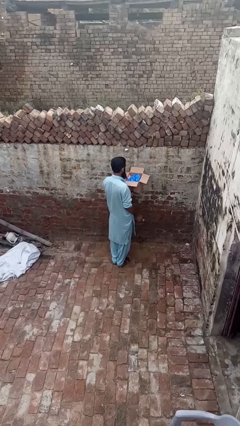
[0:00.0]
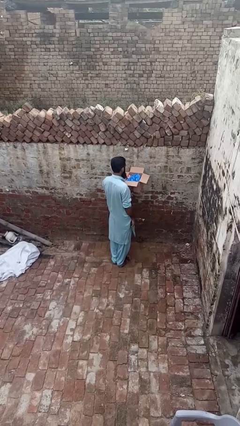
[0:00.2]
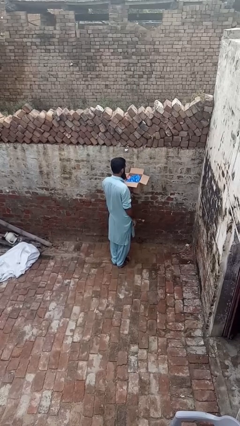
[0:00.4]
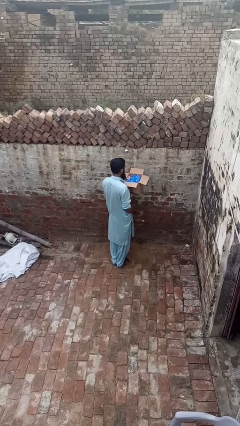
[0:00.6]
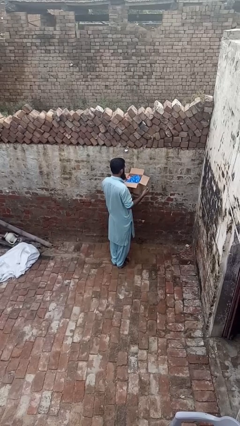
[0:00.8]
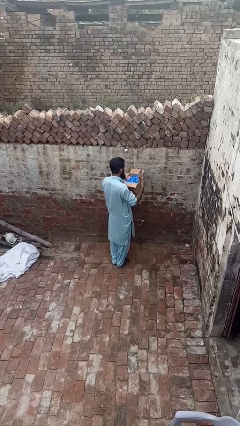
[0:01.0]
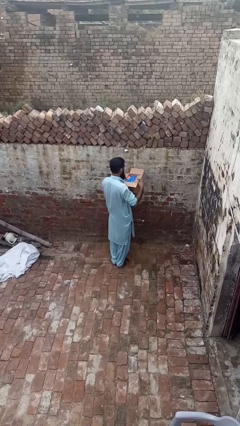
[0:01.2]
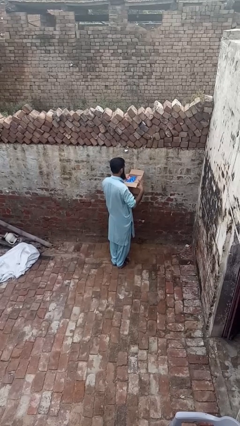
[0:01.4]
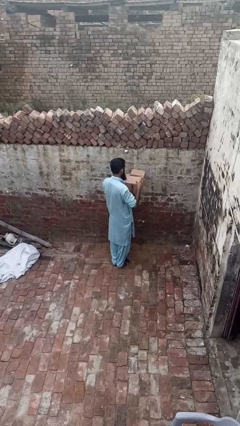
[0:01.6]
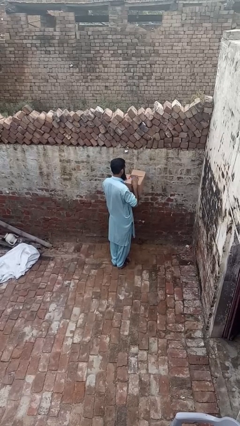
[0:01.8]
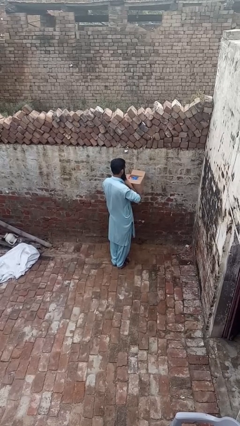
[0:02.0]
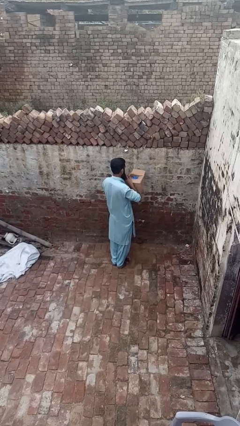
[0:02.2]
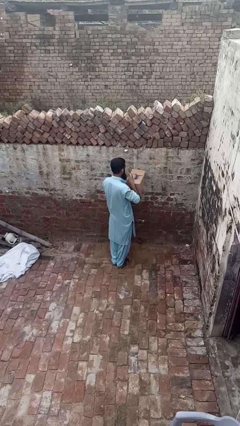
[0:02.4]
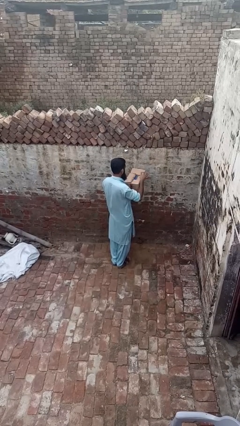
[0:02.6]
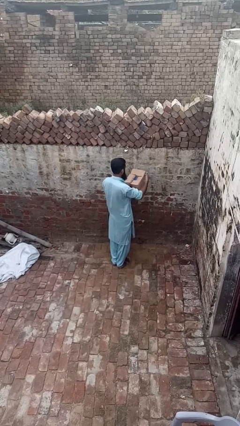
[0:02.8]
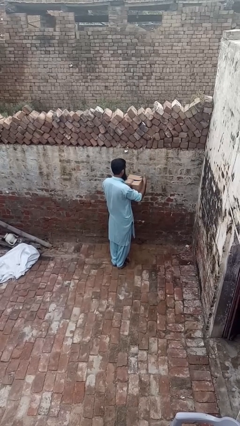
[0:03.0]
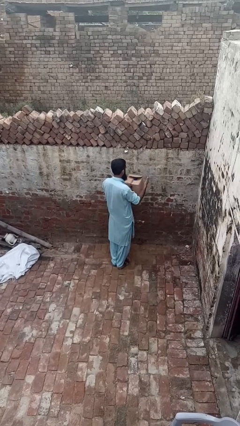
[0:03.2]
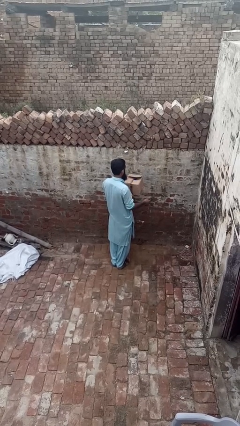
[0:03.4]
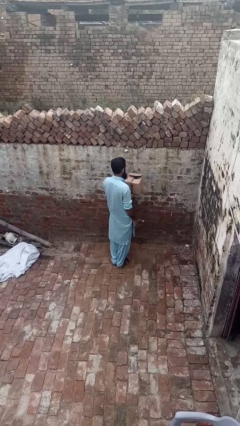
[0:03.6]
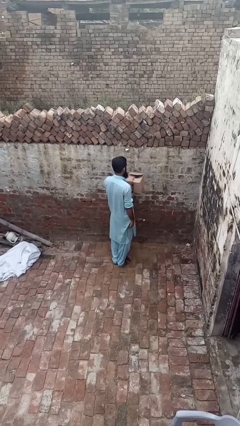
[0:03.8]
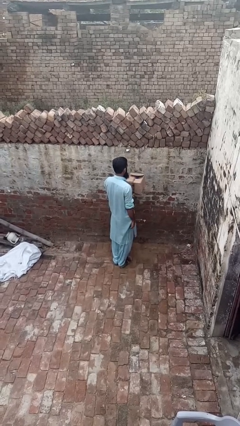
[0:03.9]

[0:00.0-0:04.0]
person closes mailbox

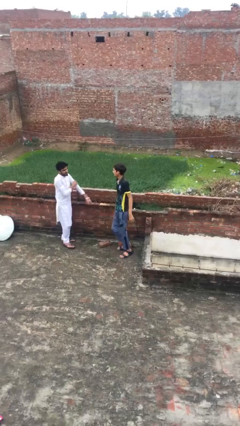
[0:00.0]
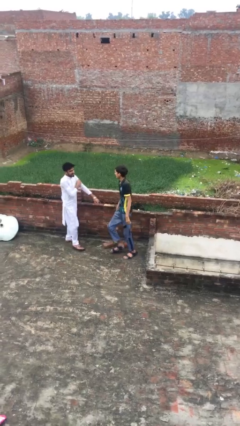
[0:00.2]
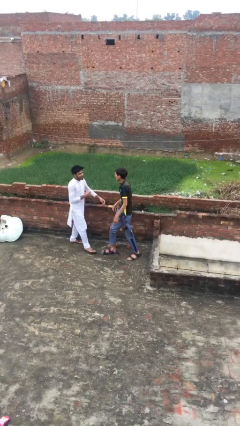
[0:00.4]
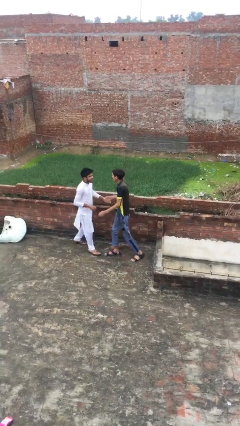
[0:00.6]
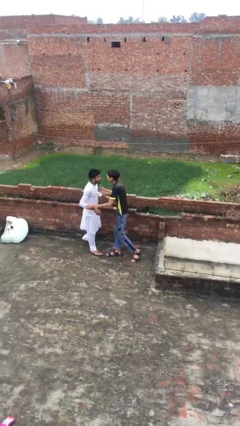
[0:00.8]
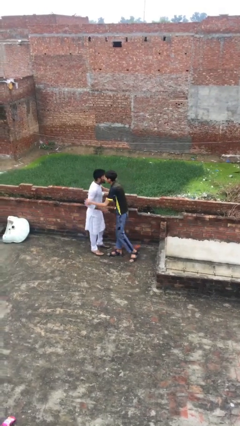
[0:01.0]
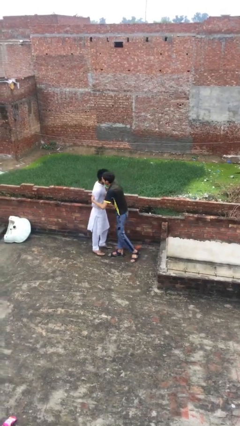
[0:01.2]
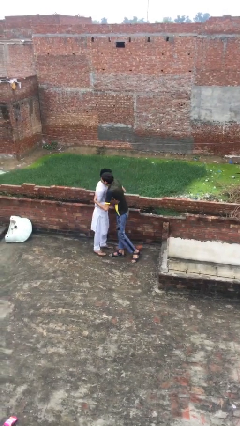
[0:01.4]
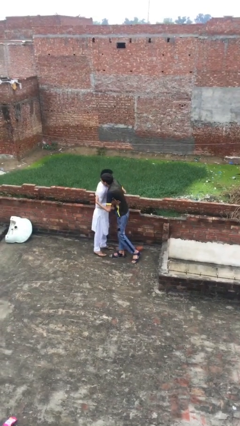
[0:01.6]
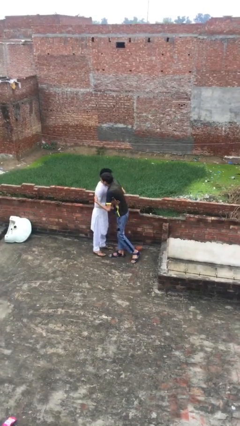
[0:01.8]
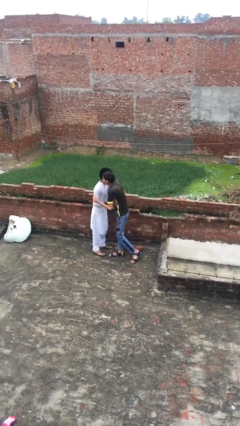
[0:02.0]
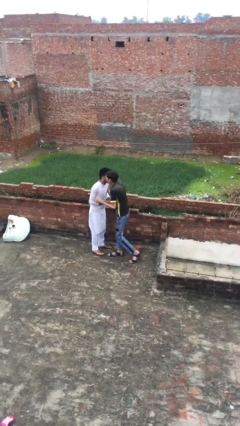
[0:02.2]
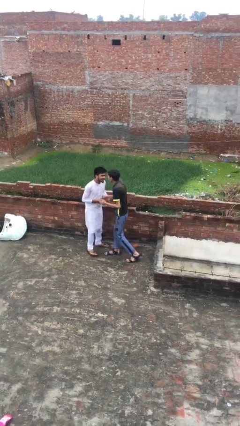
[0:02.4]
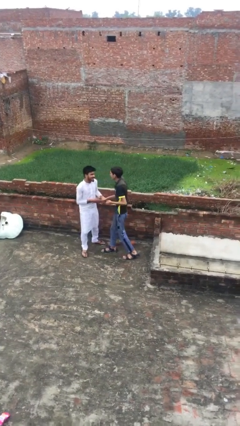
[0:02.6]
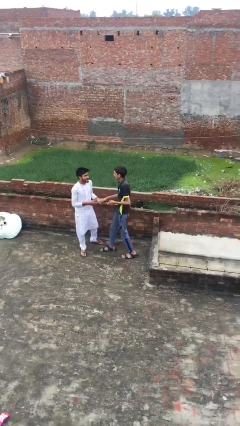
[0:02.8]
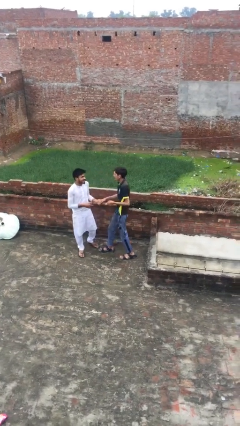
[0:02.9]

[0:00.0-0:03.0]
person embraces person

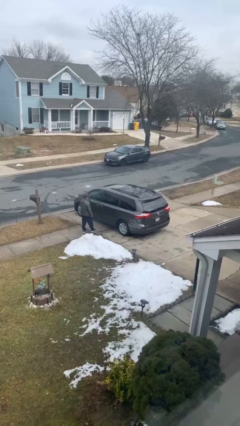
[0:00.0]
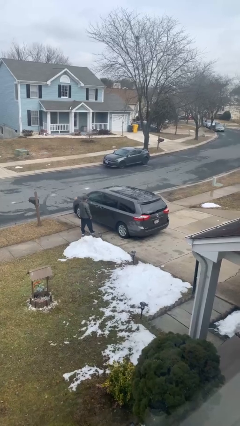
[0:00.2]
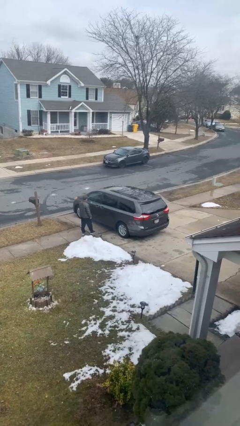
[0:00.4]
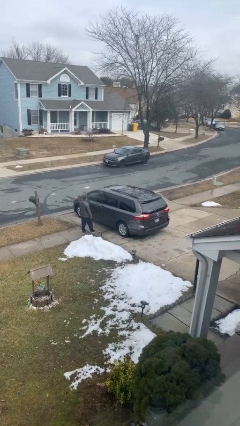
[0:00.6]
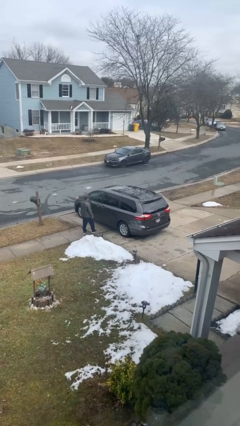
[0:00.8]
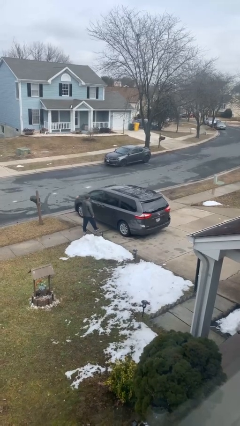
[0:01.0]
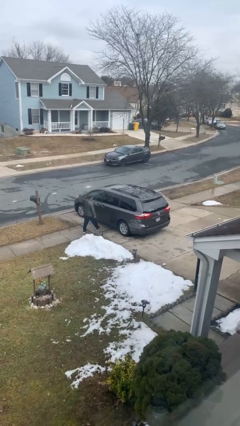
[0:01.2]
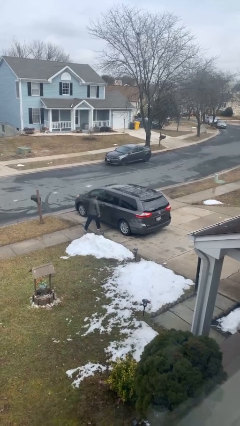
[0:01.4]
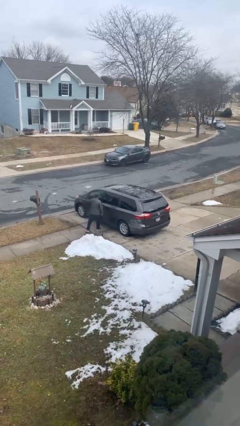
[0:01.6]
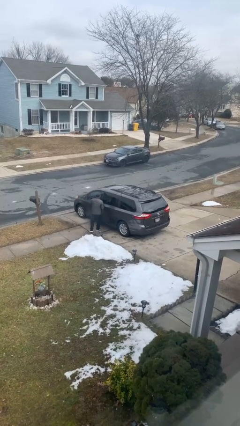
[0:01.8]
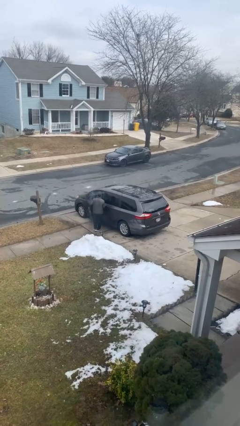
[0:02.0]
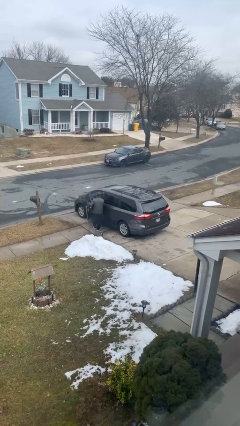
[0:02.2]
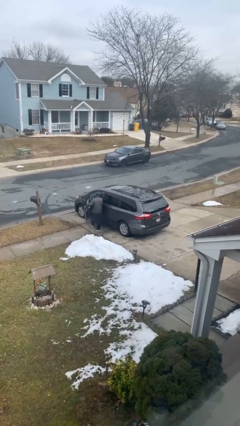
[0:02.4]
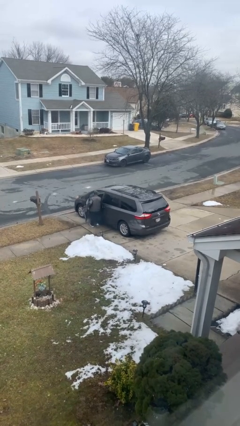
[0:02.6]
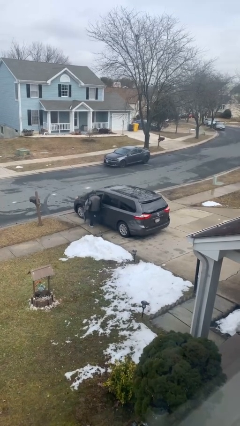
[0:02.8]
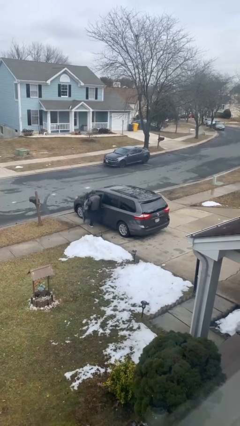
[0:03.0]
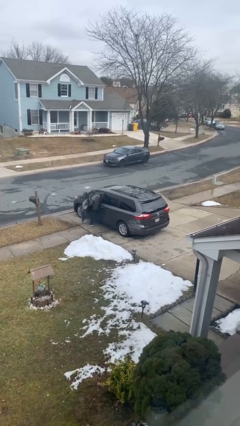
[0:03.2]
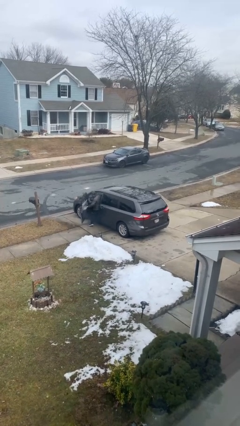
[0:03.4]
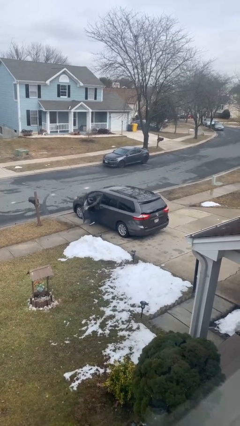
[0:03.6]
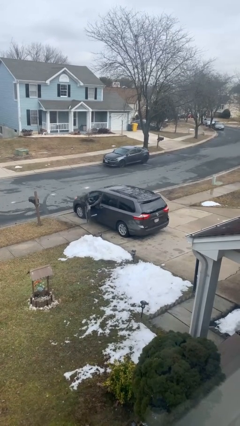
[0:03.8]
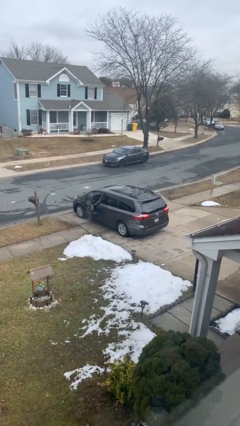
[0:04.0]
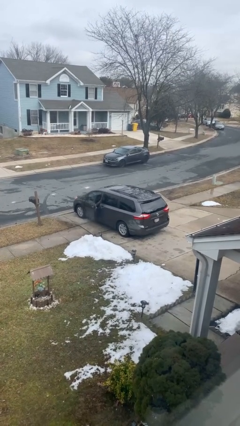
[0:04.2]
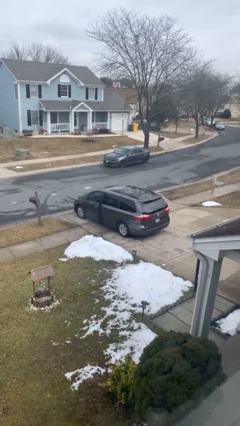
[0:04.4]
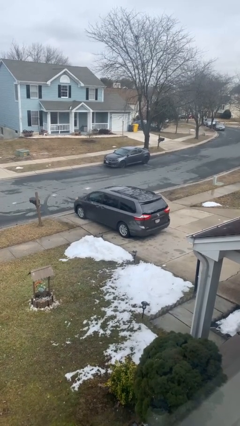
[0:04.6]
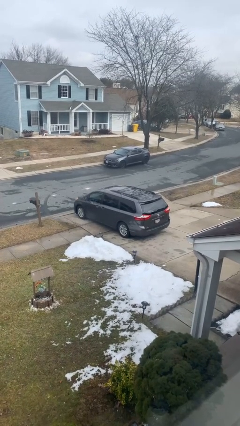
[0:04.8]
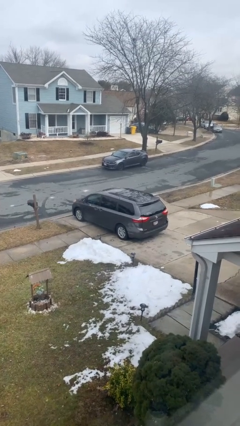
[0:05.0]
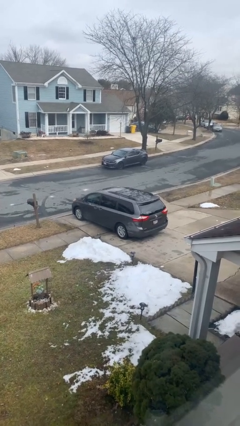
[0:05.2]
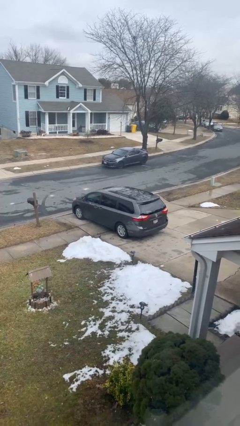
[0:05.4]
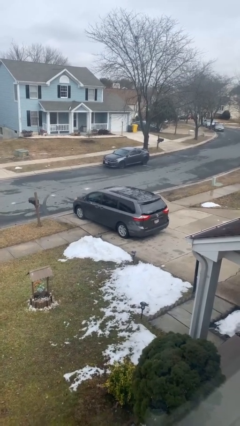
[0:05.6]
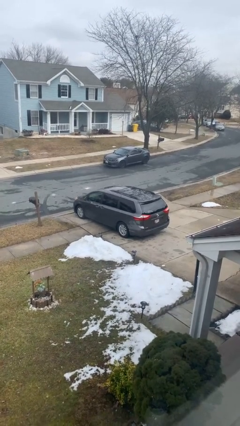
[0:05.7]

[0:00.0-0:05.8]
car picks up person

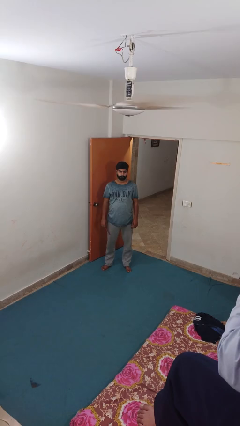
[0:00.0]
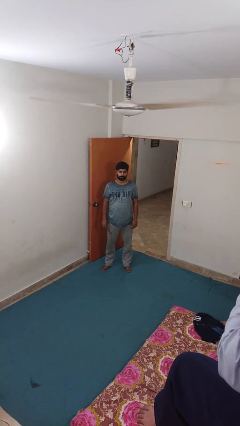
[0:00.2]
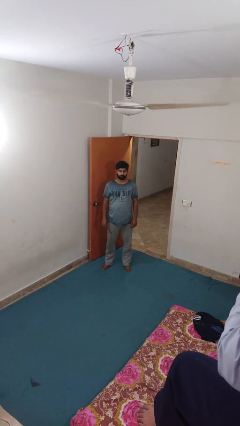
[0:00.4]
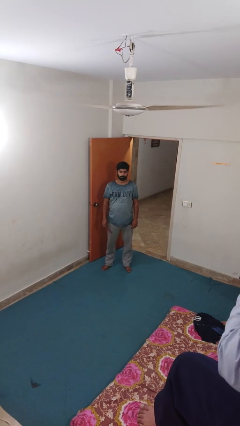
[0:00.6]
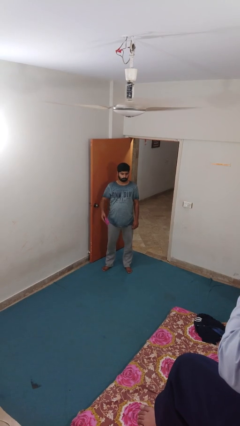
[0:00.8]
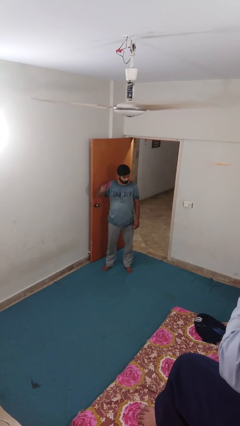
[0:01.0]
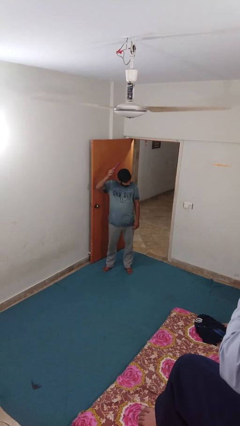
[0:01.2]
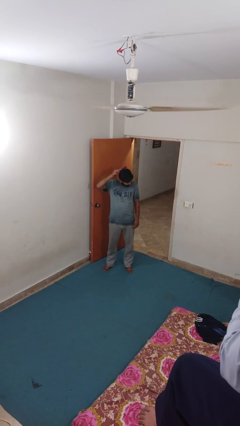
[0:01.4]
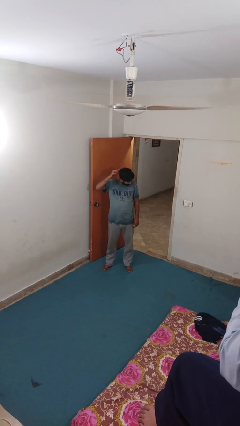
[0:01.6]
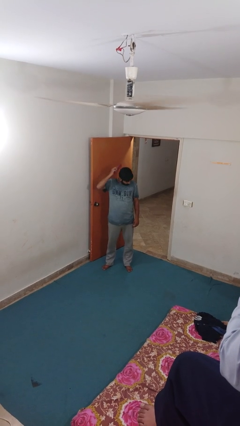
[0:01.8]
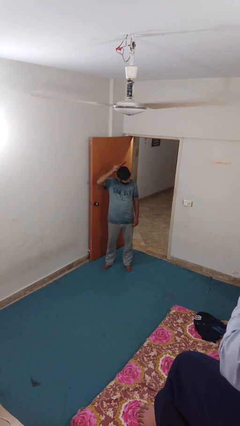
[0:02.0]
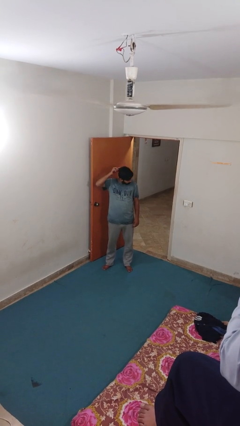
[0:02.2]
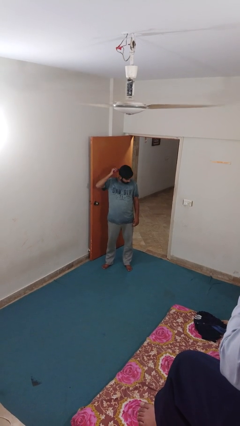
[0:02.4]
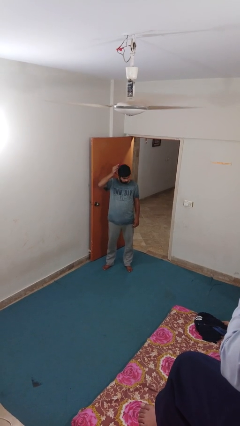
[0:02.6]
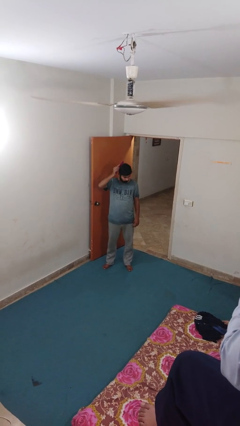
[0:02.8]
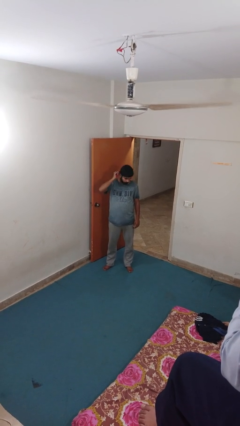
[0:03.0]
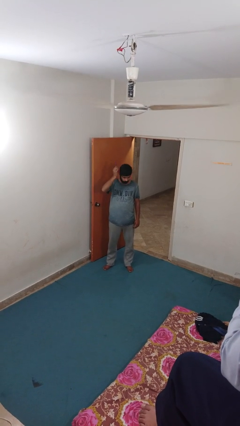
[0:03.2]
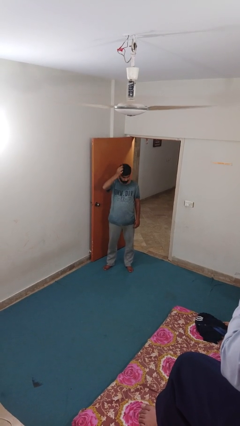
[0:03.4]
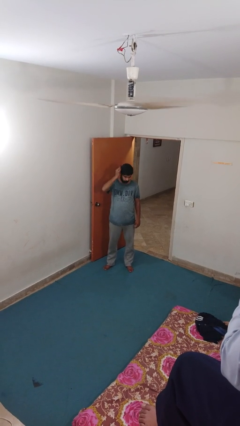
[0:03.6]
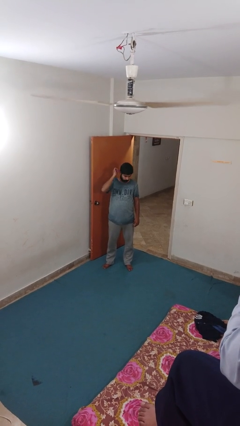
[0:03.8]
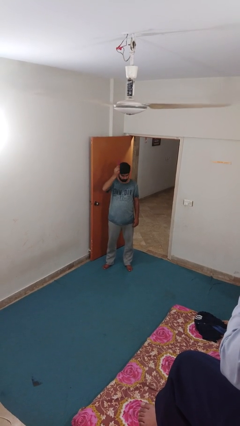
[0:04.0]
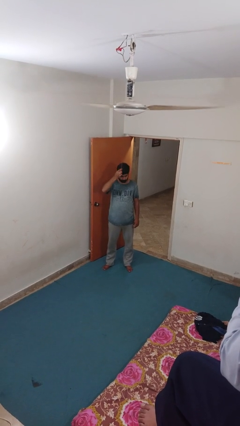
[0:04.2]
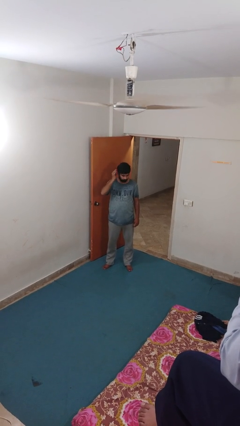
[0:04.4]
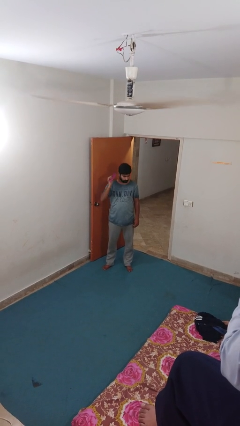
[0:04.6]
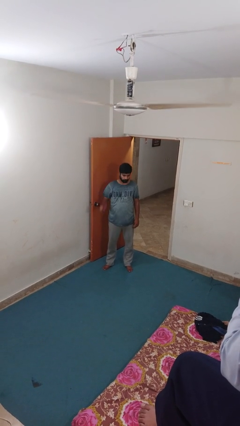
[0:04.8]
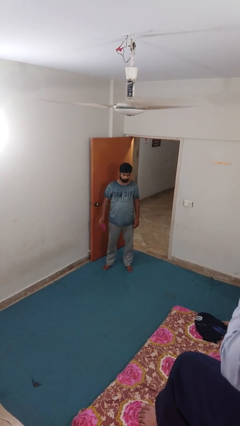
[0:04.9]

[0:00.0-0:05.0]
person brushes hair
